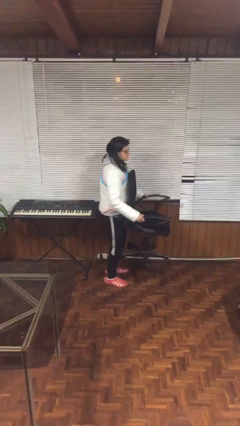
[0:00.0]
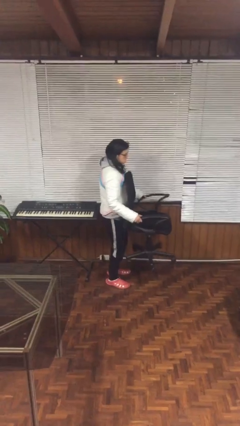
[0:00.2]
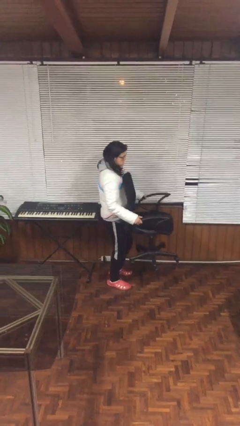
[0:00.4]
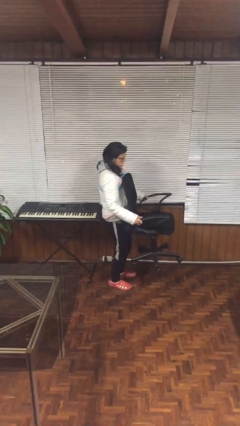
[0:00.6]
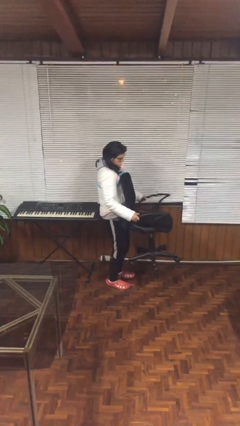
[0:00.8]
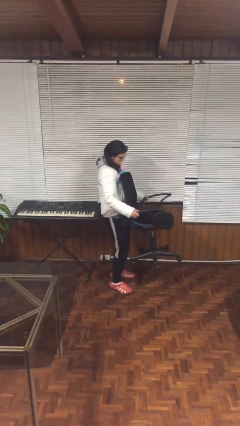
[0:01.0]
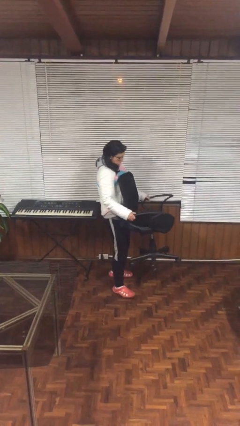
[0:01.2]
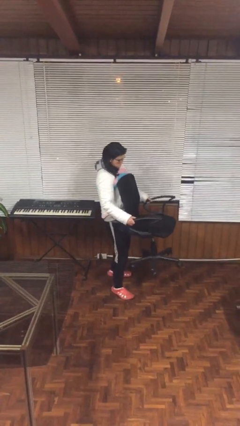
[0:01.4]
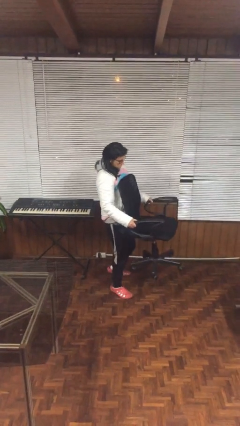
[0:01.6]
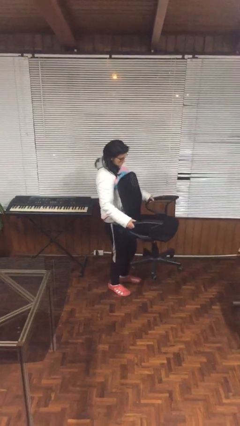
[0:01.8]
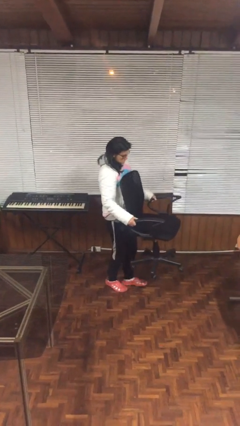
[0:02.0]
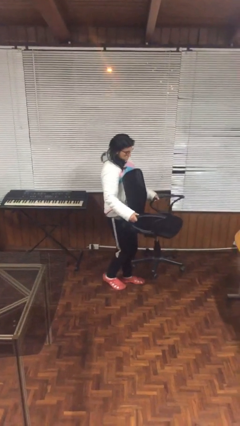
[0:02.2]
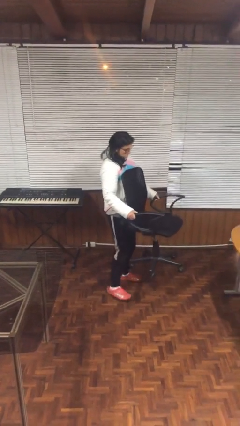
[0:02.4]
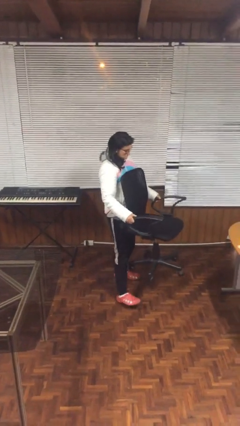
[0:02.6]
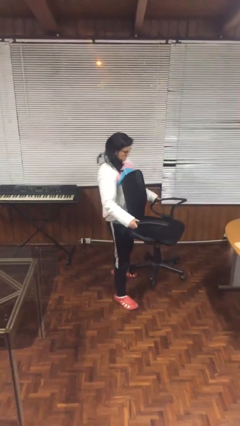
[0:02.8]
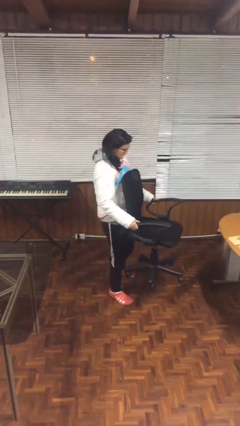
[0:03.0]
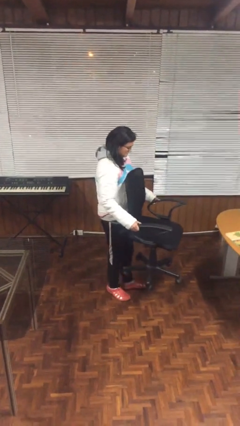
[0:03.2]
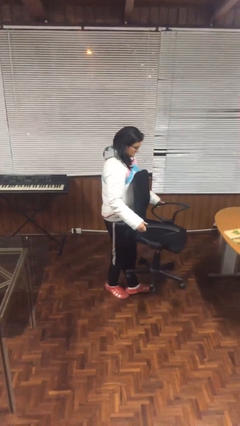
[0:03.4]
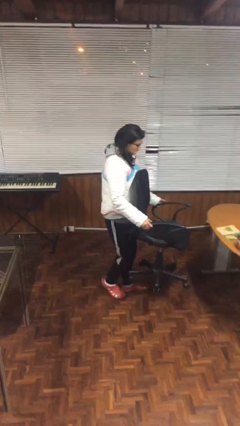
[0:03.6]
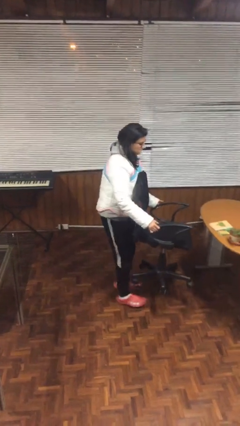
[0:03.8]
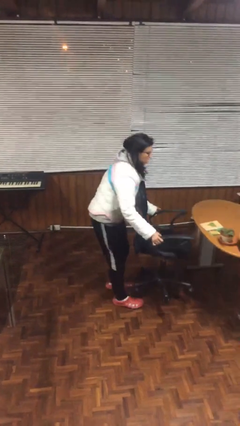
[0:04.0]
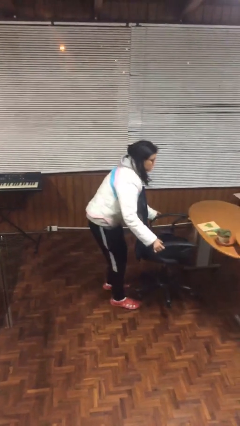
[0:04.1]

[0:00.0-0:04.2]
person carries heavy object

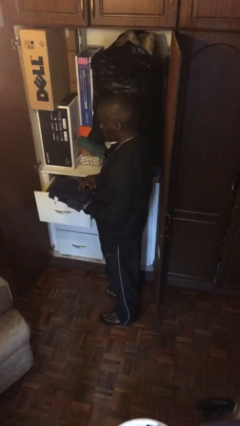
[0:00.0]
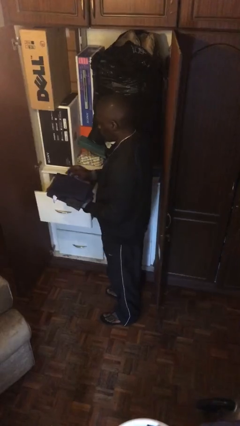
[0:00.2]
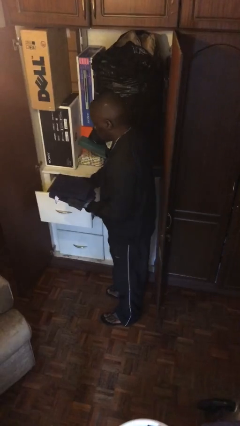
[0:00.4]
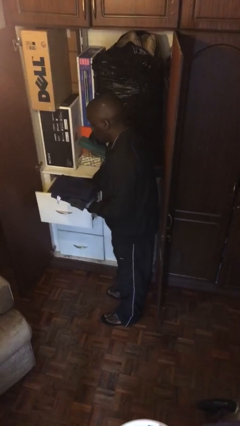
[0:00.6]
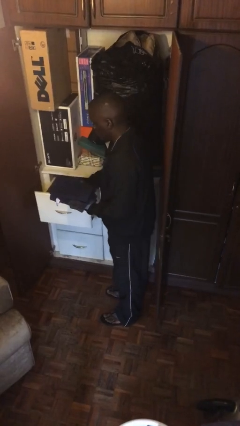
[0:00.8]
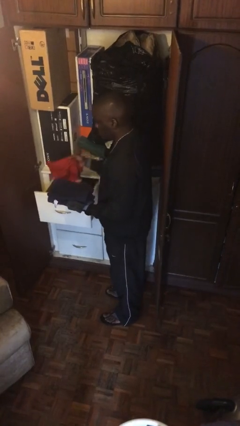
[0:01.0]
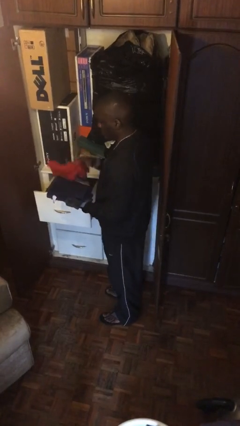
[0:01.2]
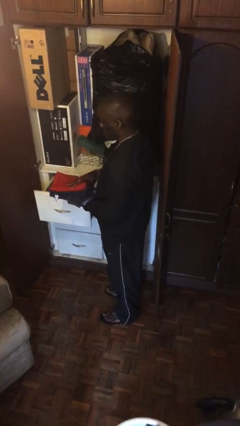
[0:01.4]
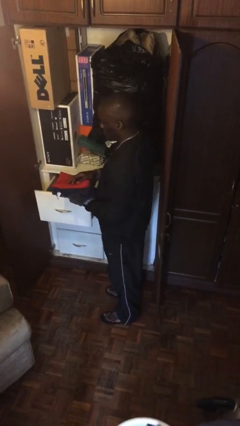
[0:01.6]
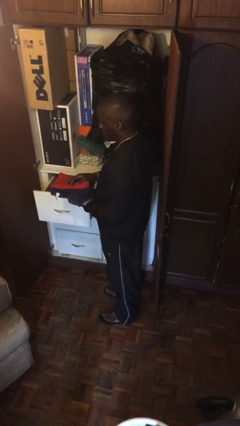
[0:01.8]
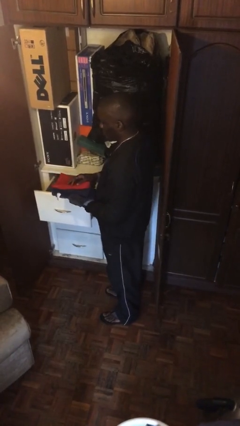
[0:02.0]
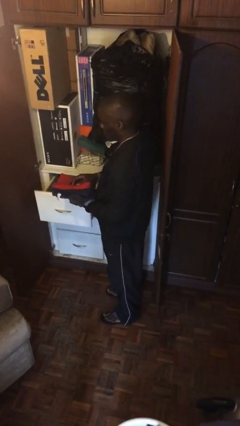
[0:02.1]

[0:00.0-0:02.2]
person takes clothes from dresser

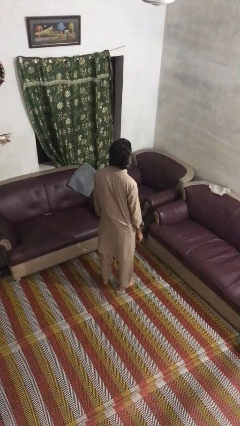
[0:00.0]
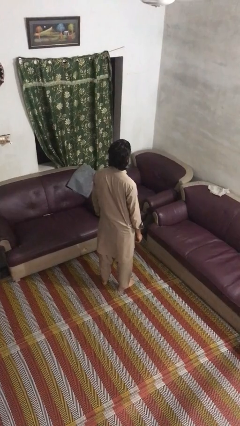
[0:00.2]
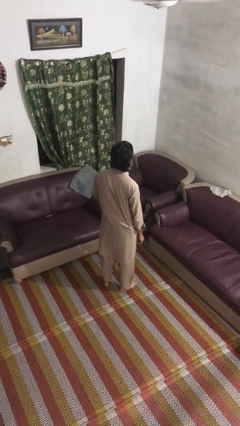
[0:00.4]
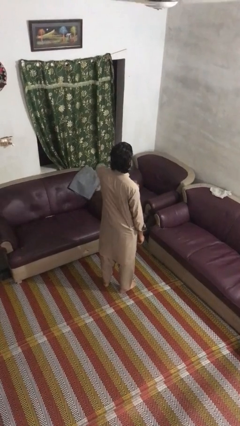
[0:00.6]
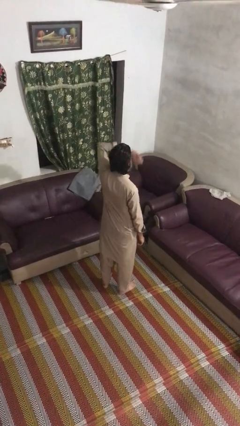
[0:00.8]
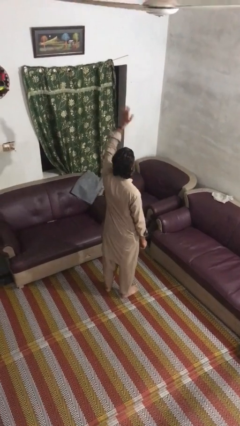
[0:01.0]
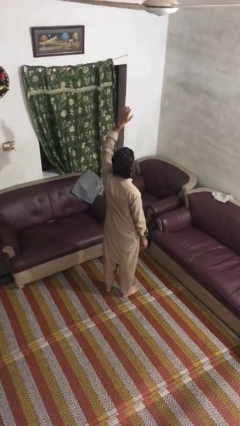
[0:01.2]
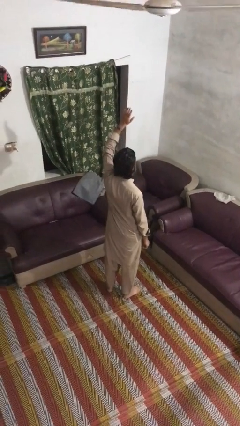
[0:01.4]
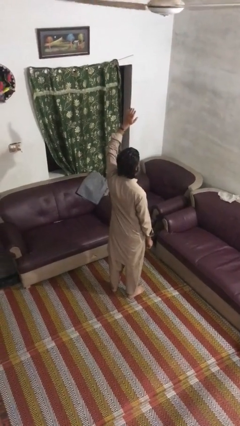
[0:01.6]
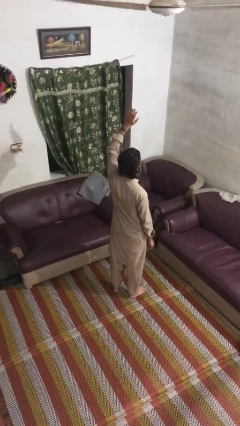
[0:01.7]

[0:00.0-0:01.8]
person gestures swipe up

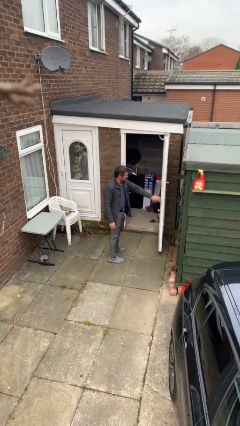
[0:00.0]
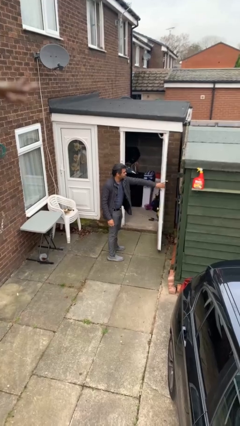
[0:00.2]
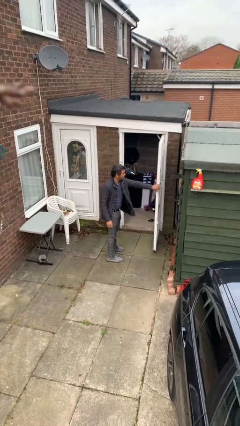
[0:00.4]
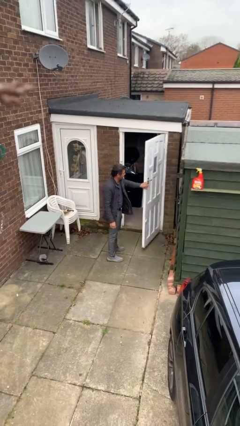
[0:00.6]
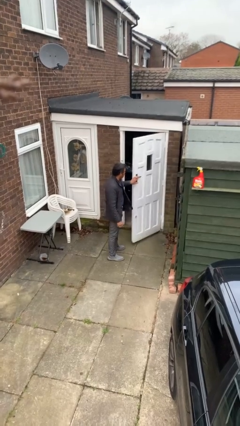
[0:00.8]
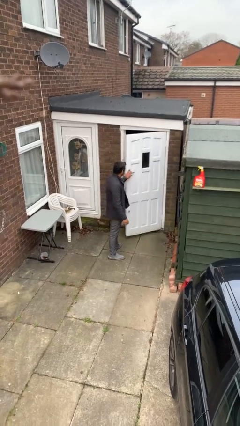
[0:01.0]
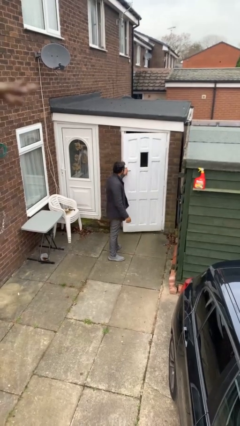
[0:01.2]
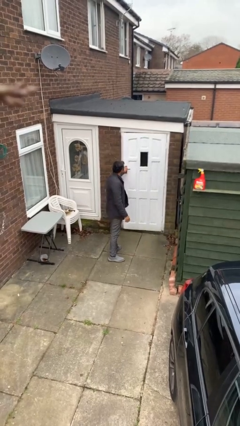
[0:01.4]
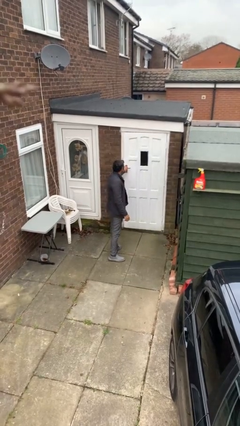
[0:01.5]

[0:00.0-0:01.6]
person closes facility door

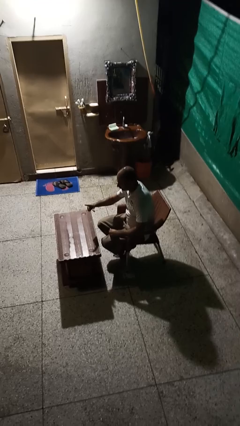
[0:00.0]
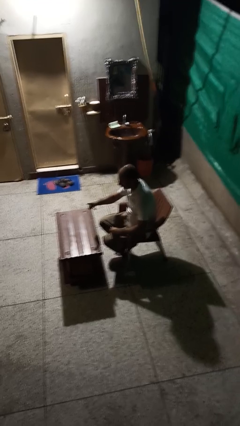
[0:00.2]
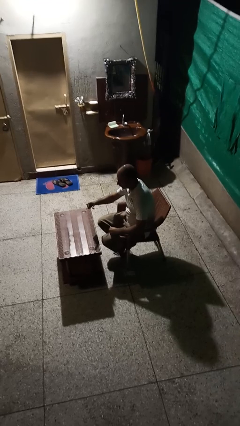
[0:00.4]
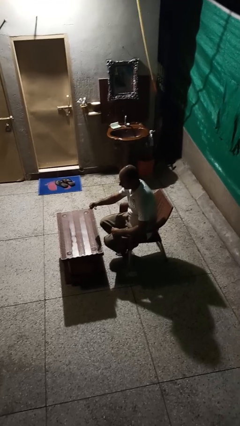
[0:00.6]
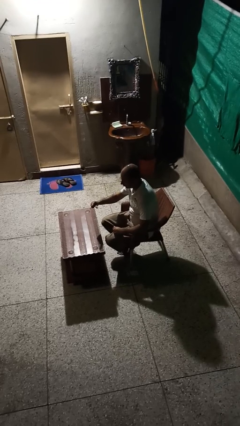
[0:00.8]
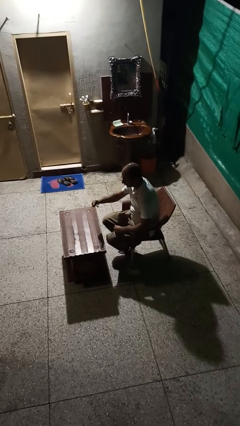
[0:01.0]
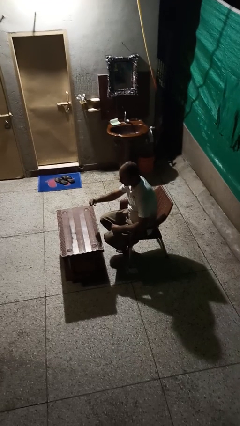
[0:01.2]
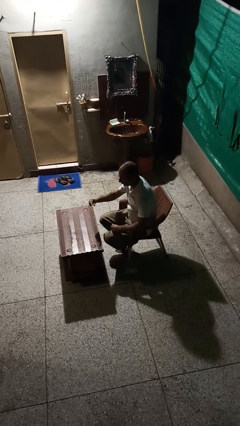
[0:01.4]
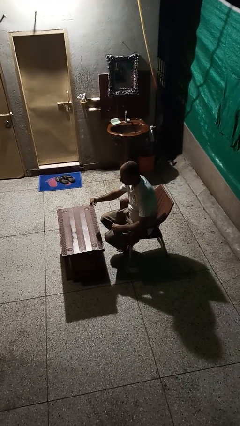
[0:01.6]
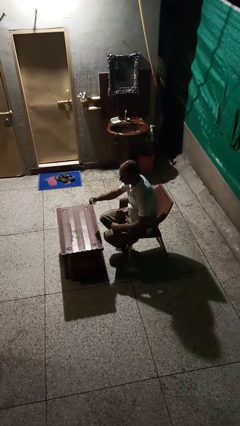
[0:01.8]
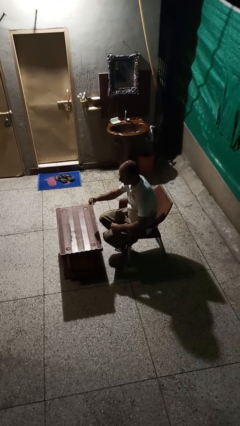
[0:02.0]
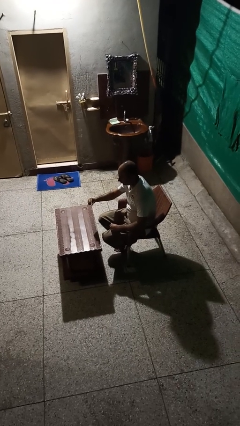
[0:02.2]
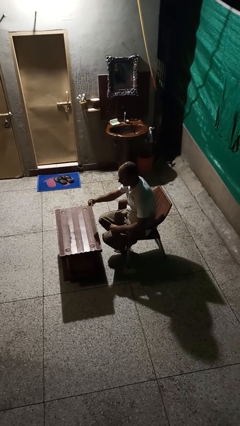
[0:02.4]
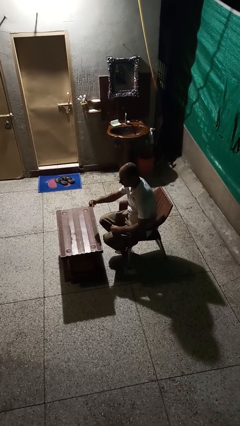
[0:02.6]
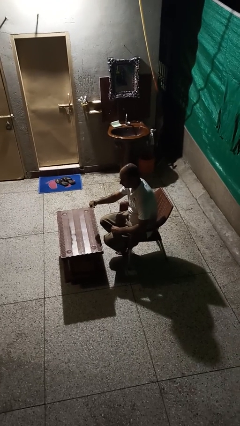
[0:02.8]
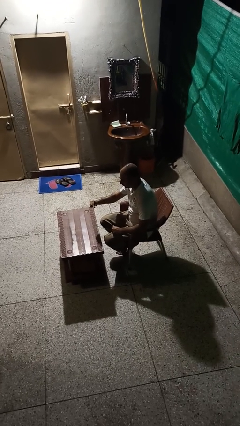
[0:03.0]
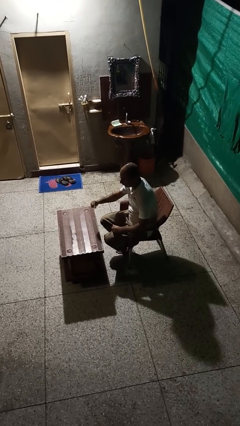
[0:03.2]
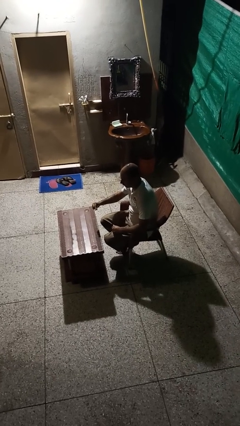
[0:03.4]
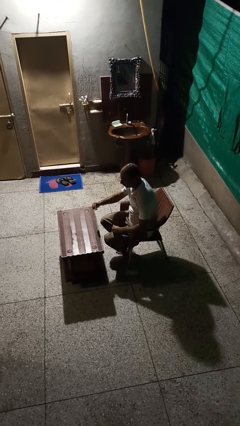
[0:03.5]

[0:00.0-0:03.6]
person gestures zoom out

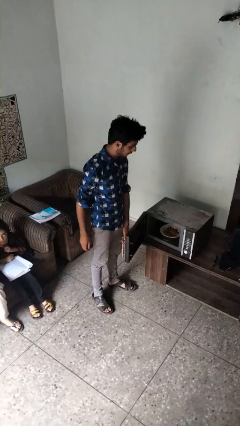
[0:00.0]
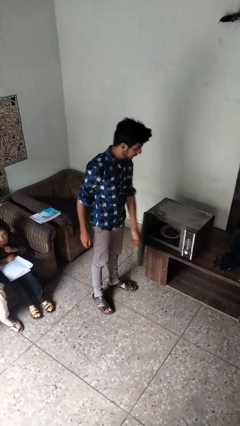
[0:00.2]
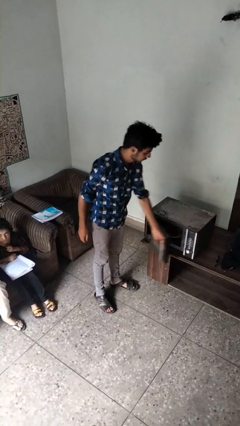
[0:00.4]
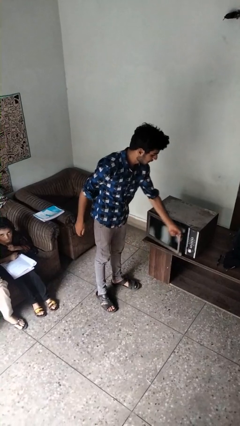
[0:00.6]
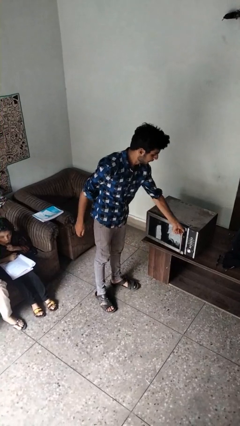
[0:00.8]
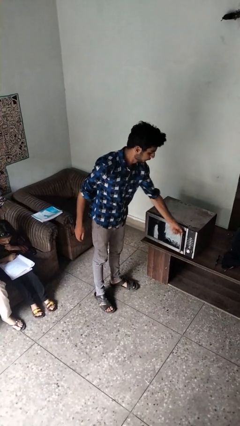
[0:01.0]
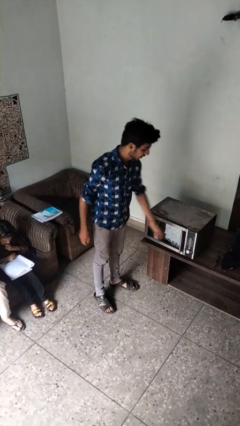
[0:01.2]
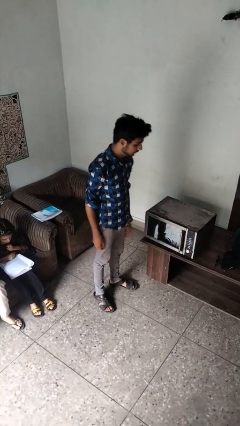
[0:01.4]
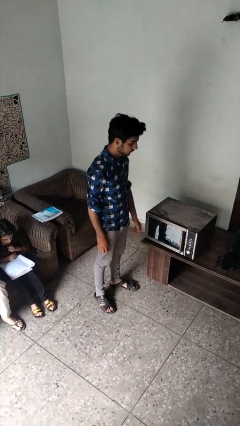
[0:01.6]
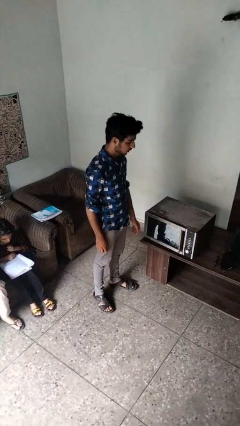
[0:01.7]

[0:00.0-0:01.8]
person closes microwave

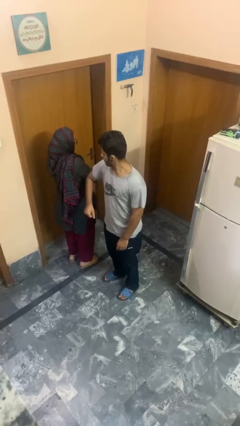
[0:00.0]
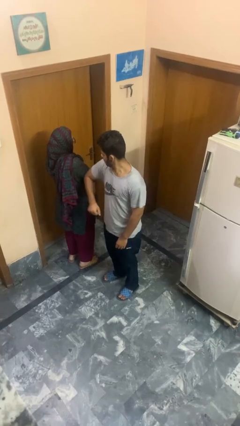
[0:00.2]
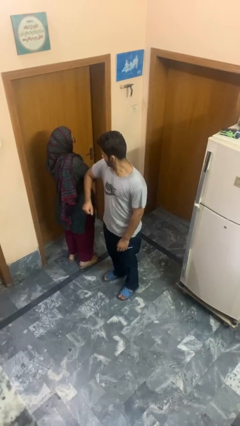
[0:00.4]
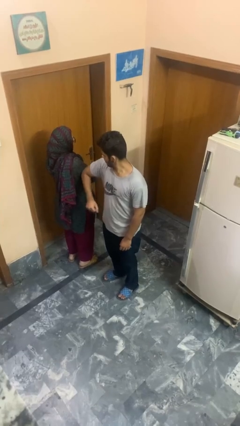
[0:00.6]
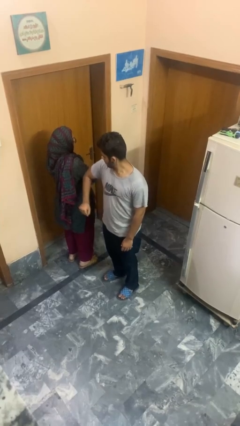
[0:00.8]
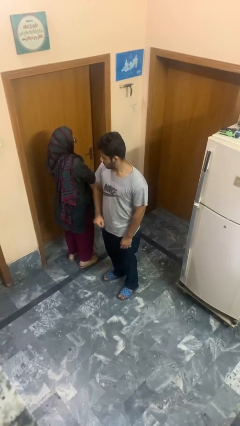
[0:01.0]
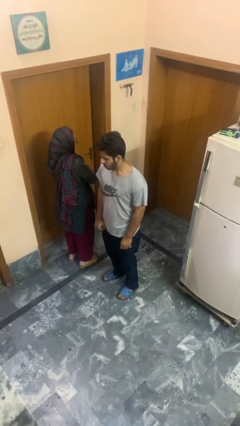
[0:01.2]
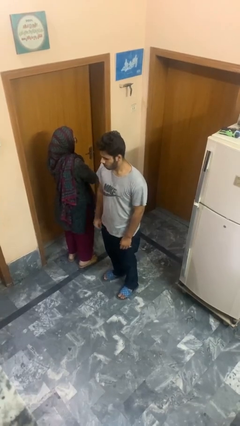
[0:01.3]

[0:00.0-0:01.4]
person nudges person with elbow
